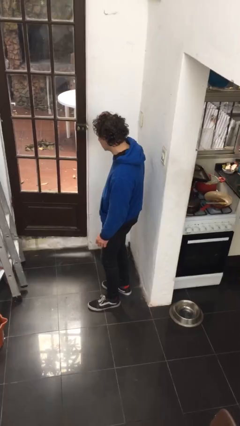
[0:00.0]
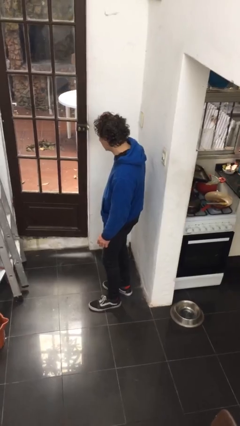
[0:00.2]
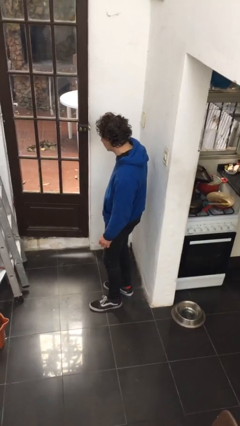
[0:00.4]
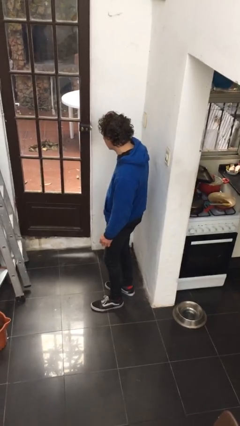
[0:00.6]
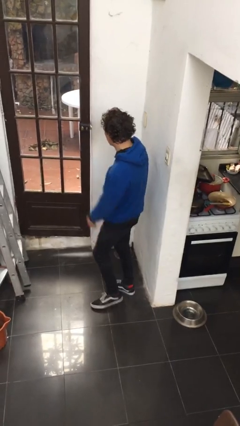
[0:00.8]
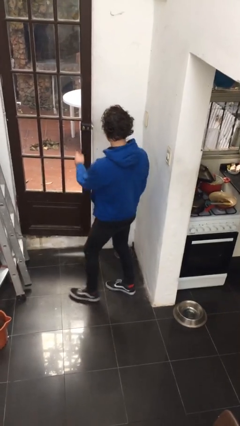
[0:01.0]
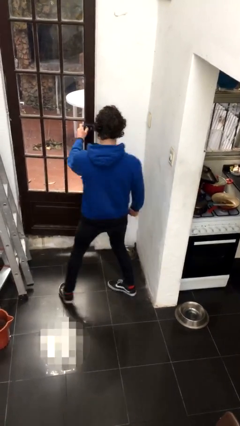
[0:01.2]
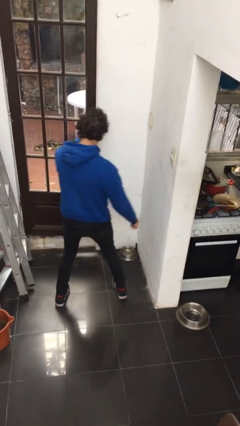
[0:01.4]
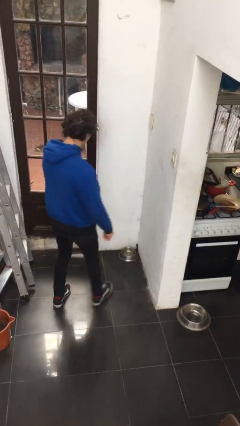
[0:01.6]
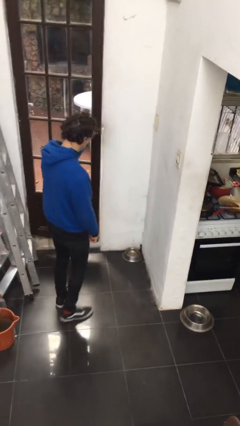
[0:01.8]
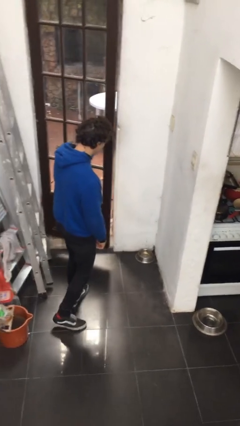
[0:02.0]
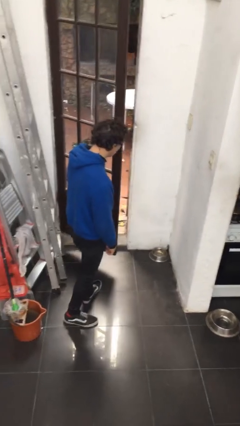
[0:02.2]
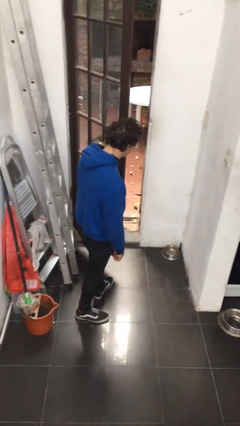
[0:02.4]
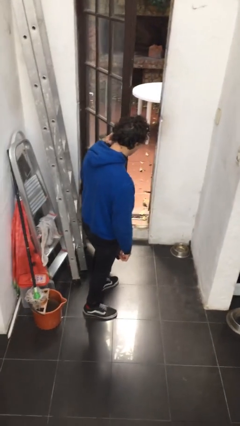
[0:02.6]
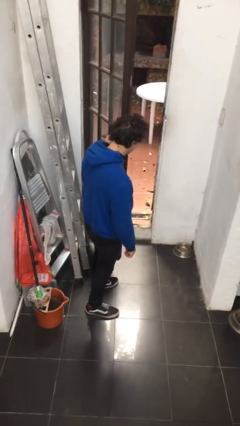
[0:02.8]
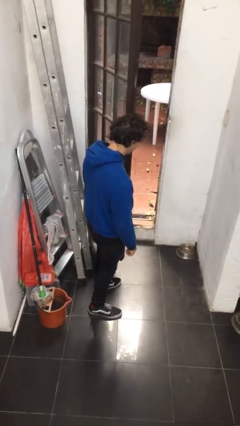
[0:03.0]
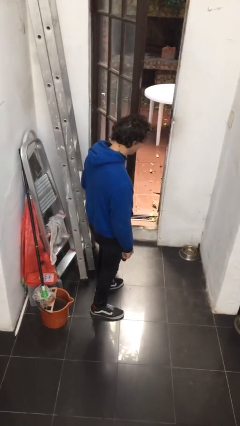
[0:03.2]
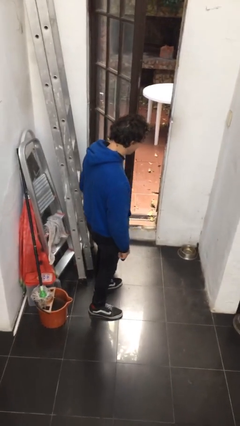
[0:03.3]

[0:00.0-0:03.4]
person opens facility door

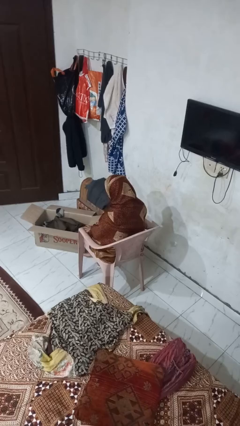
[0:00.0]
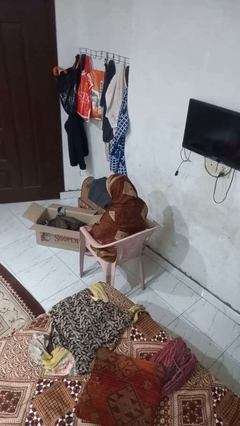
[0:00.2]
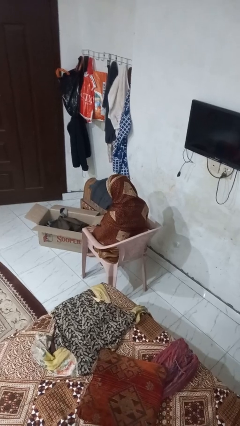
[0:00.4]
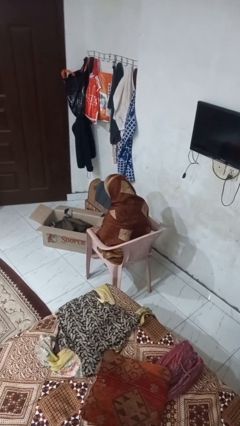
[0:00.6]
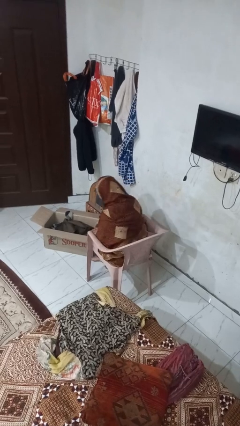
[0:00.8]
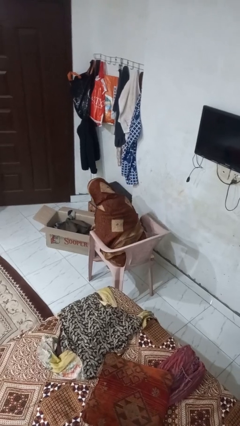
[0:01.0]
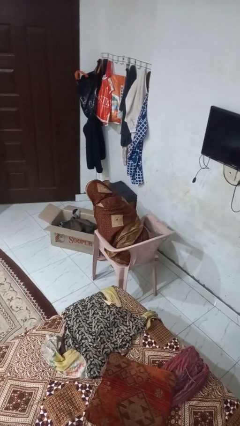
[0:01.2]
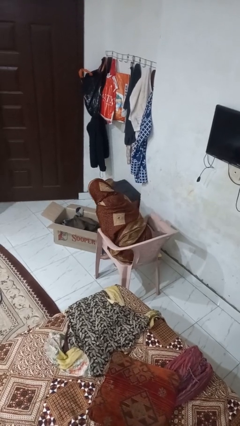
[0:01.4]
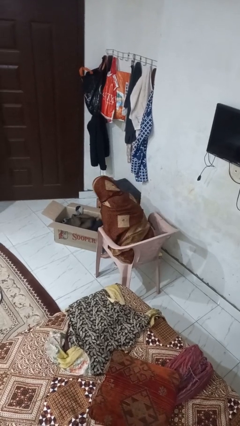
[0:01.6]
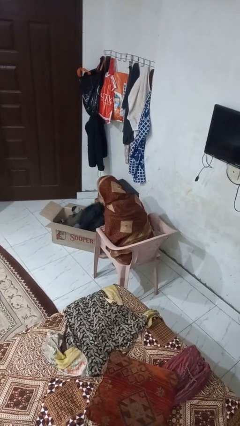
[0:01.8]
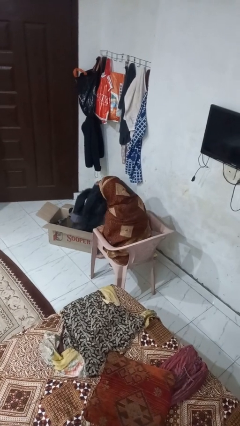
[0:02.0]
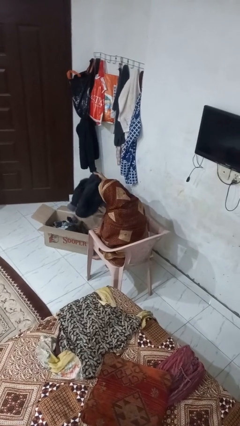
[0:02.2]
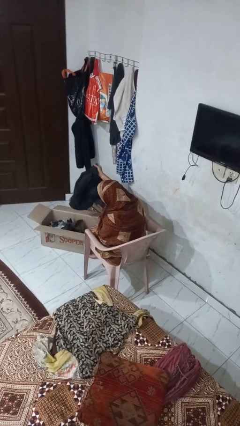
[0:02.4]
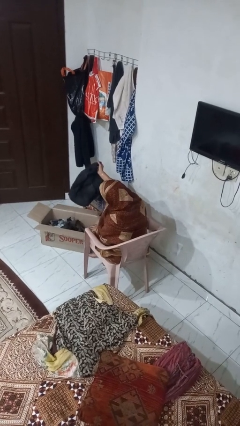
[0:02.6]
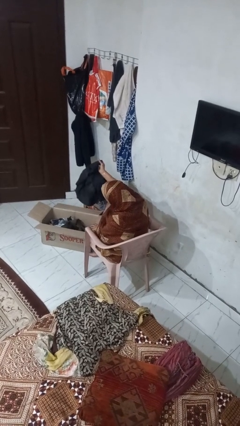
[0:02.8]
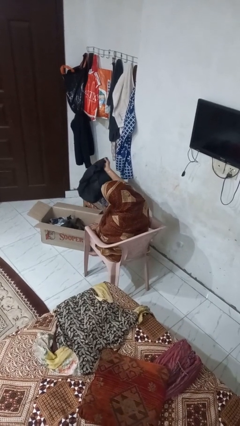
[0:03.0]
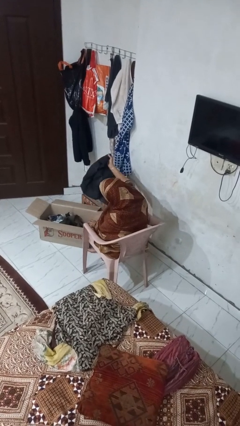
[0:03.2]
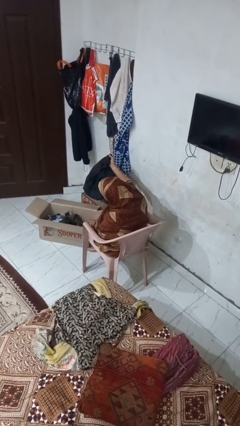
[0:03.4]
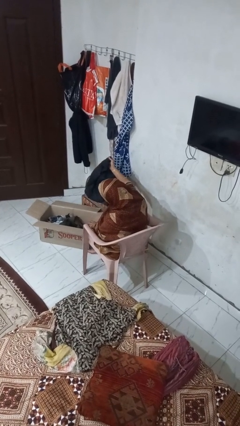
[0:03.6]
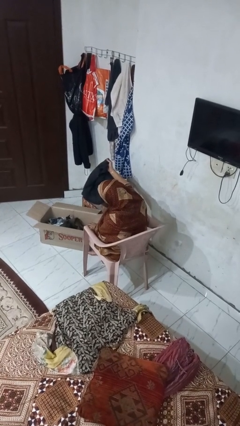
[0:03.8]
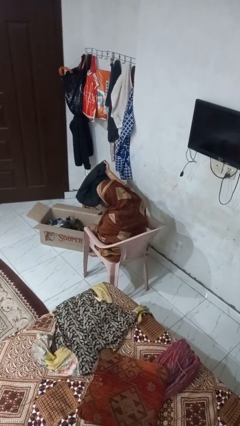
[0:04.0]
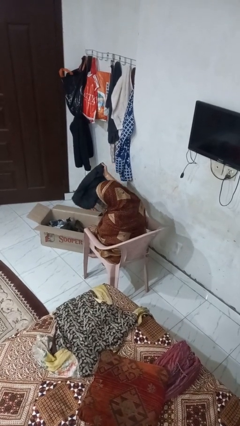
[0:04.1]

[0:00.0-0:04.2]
person takes object from box

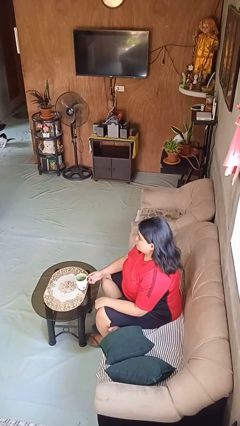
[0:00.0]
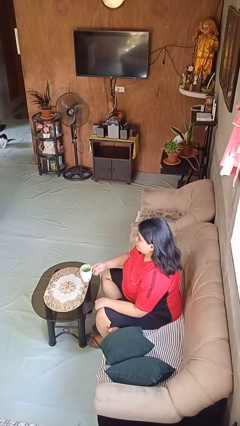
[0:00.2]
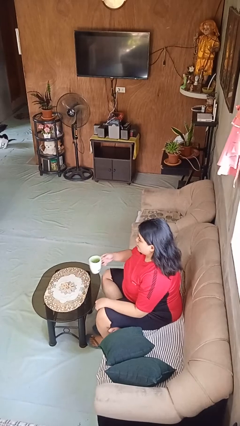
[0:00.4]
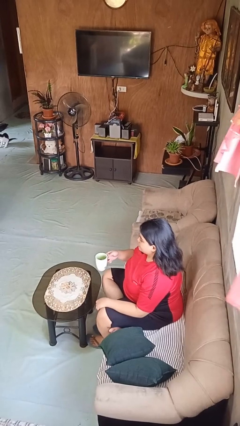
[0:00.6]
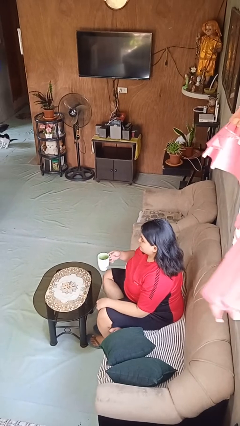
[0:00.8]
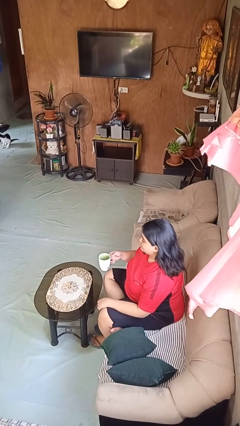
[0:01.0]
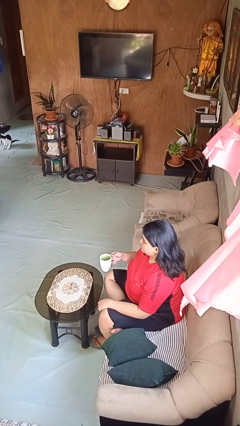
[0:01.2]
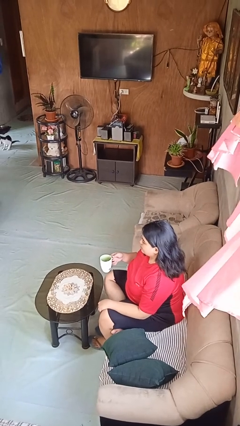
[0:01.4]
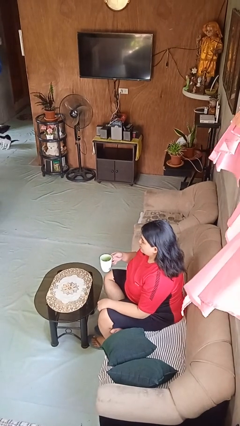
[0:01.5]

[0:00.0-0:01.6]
person picks up object from table

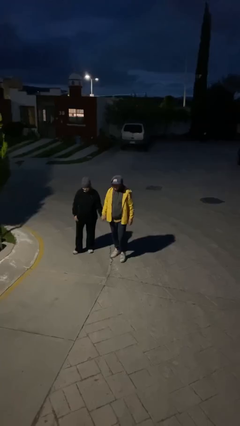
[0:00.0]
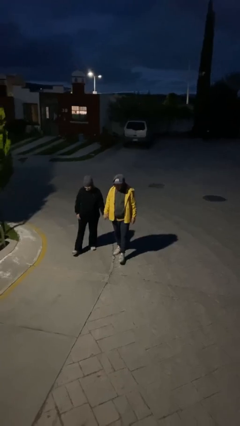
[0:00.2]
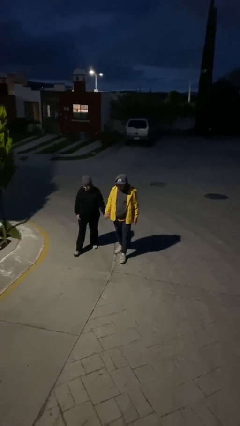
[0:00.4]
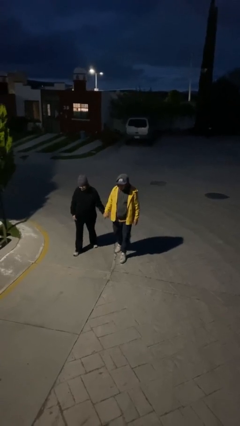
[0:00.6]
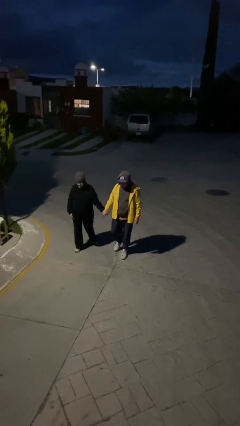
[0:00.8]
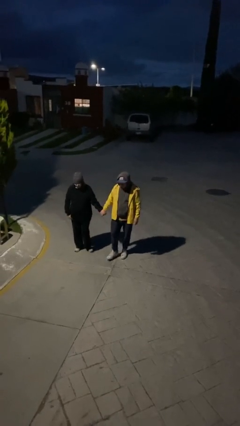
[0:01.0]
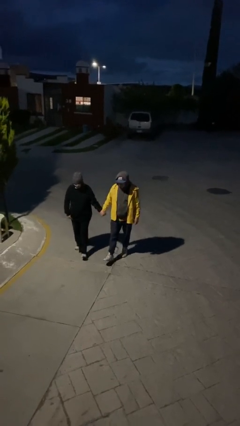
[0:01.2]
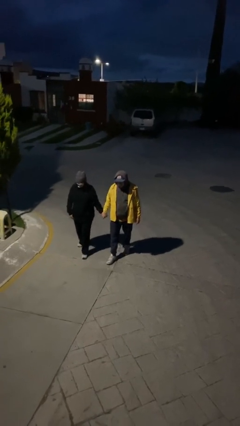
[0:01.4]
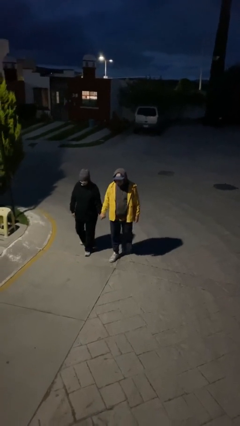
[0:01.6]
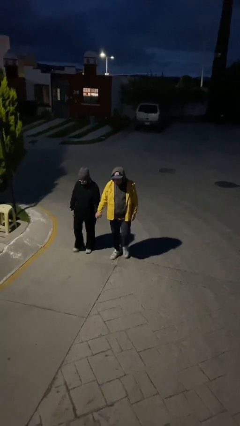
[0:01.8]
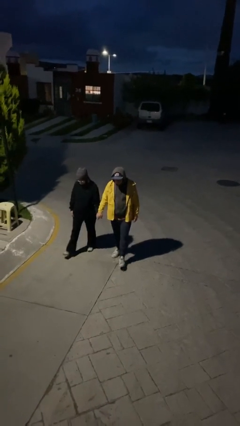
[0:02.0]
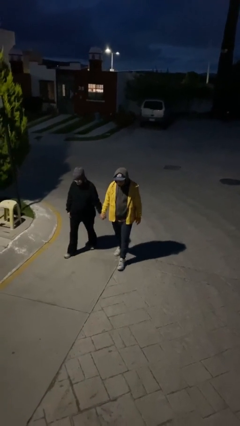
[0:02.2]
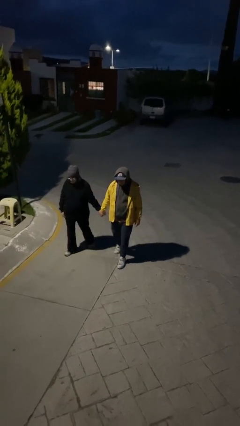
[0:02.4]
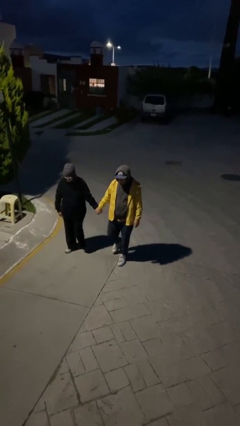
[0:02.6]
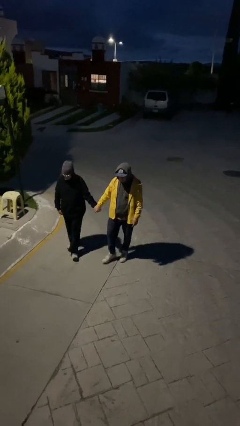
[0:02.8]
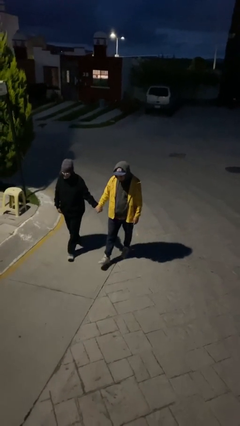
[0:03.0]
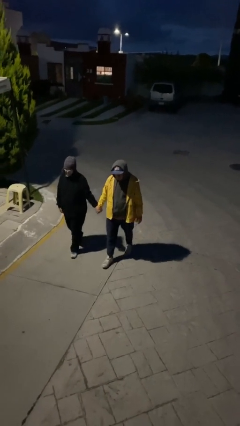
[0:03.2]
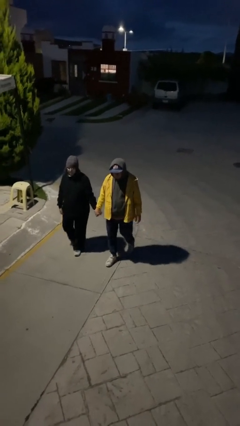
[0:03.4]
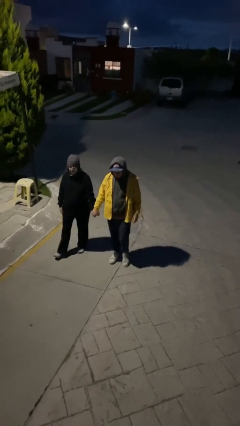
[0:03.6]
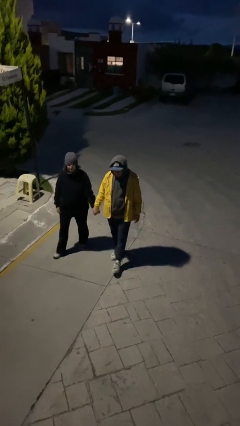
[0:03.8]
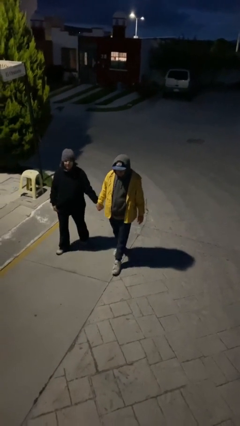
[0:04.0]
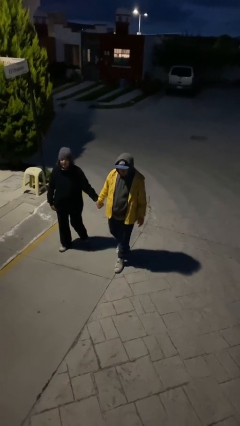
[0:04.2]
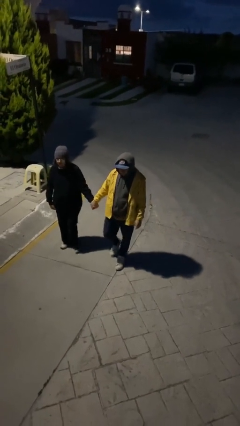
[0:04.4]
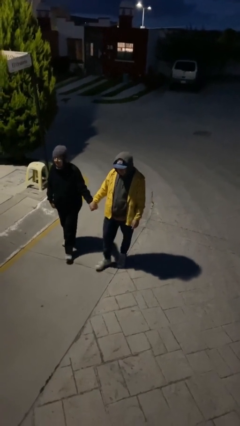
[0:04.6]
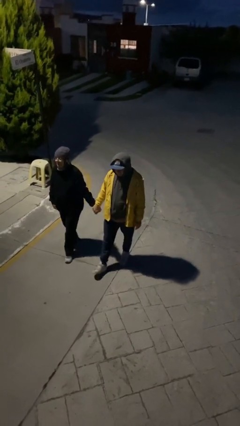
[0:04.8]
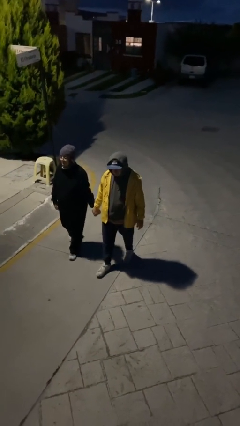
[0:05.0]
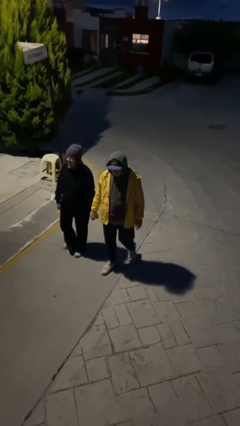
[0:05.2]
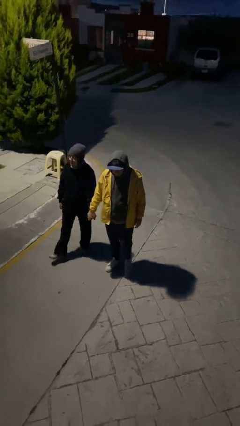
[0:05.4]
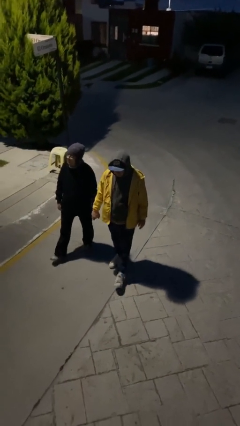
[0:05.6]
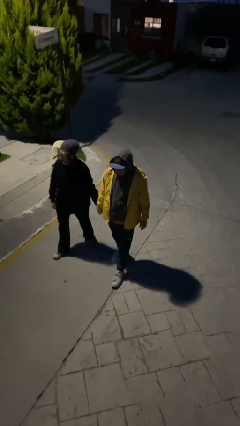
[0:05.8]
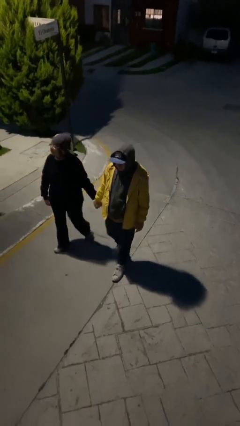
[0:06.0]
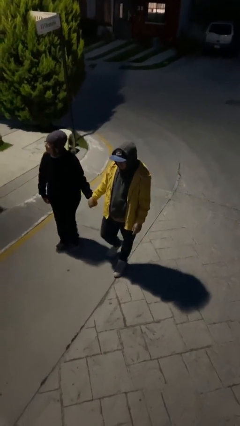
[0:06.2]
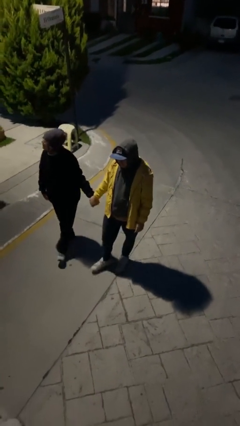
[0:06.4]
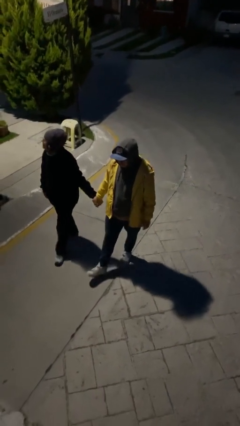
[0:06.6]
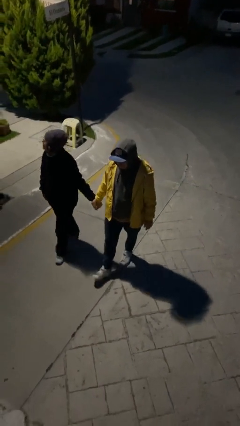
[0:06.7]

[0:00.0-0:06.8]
person holds hand

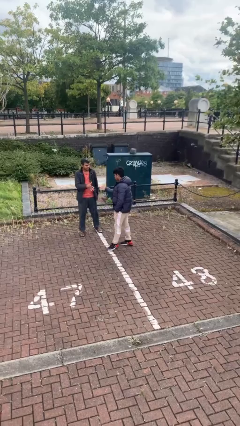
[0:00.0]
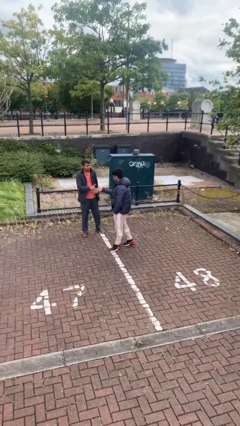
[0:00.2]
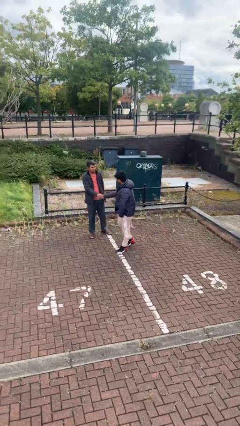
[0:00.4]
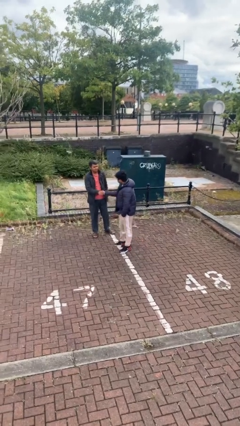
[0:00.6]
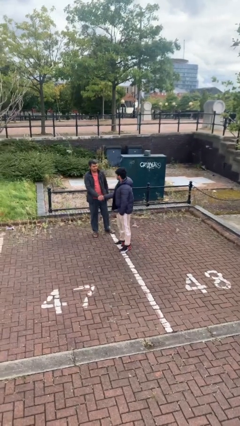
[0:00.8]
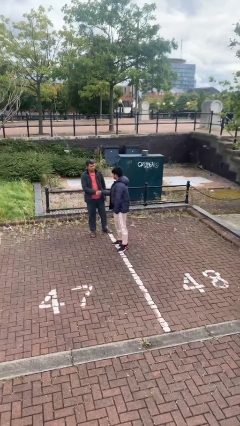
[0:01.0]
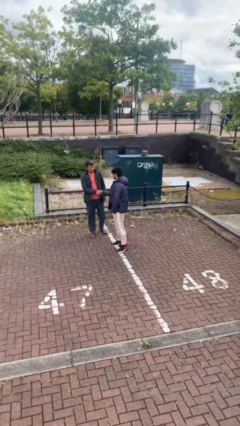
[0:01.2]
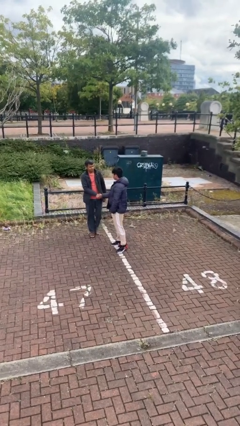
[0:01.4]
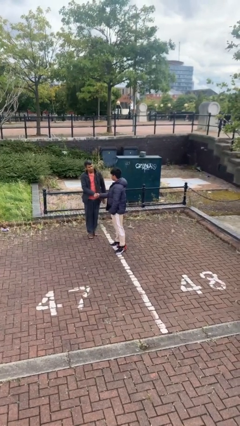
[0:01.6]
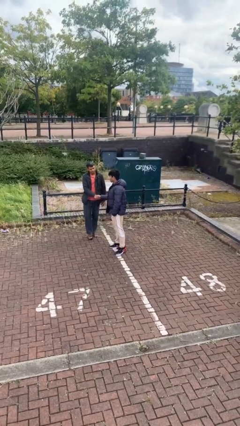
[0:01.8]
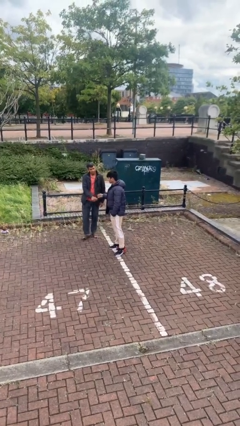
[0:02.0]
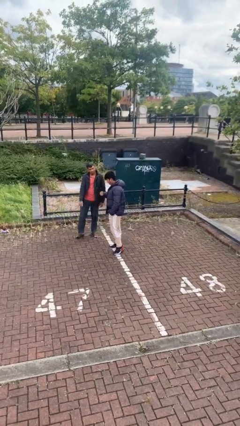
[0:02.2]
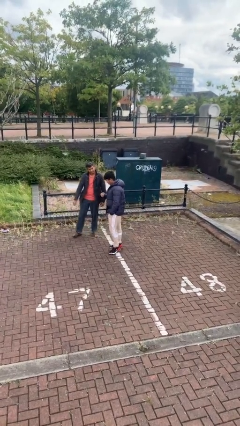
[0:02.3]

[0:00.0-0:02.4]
person shakes hand
